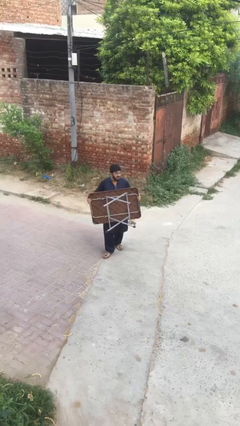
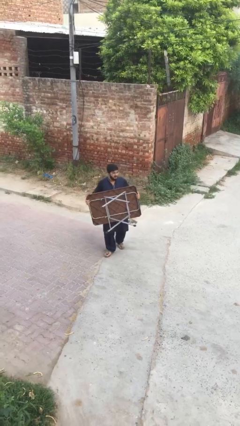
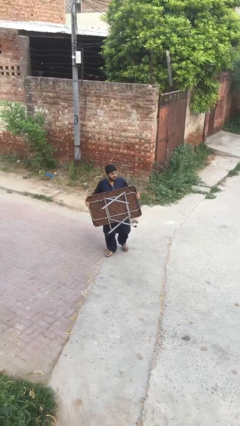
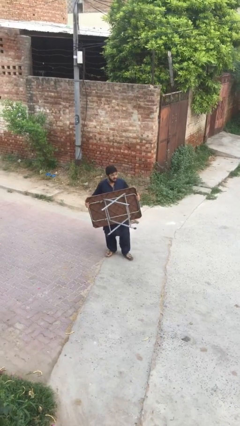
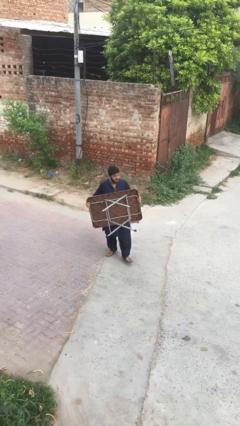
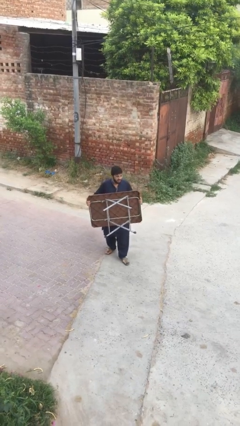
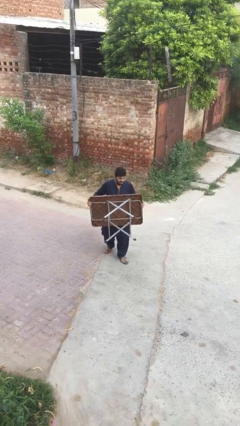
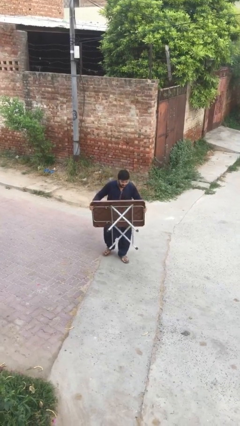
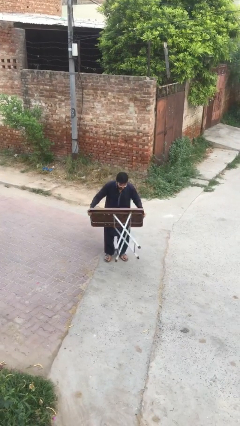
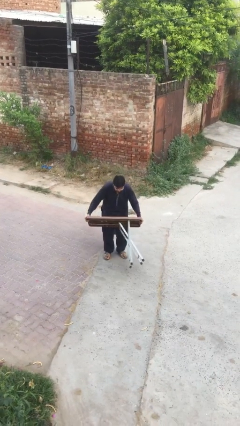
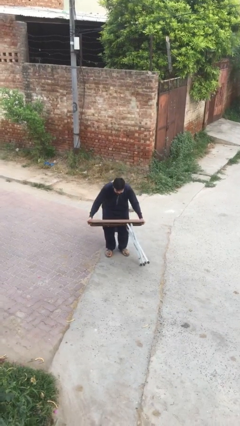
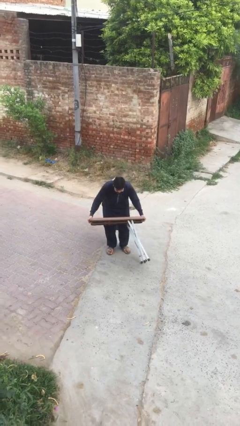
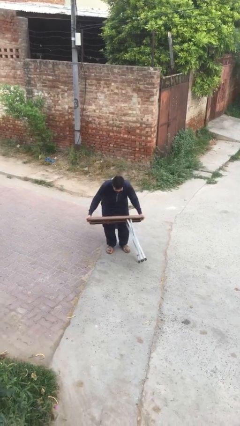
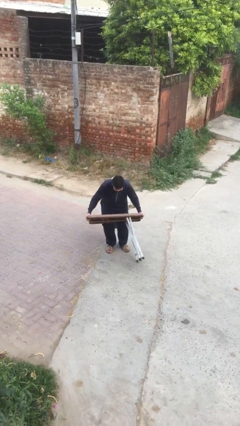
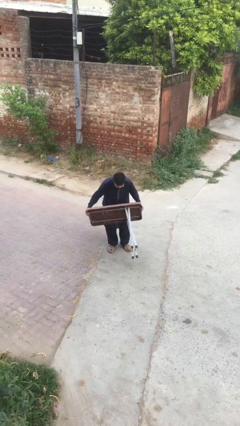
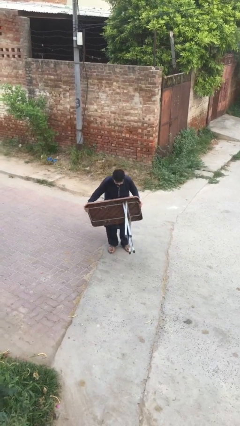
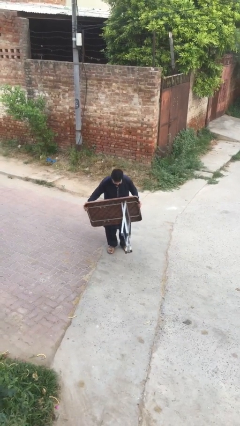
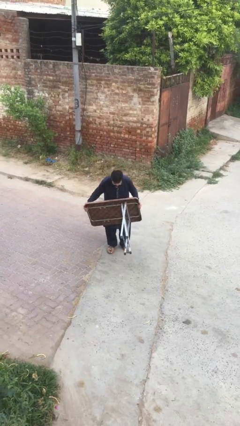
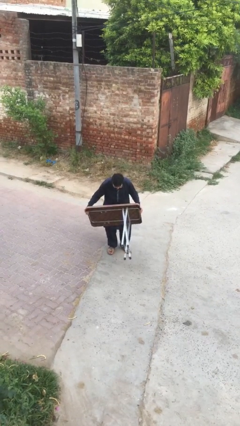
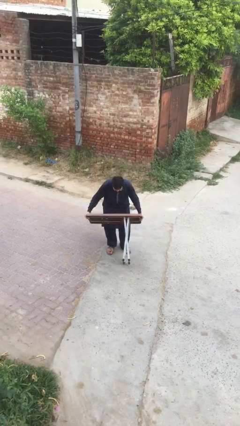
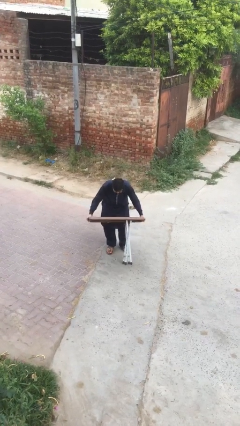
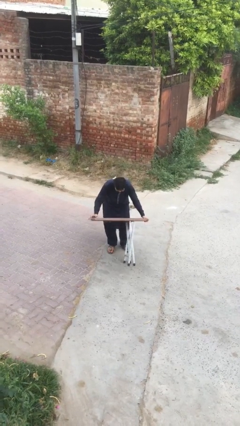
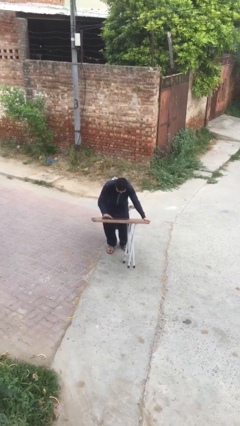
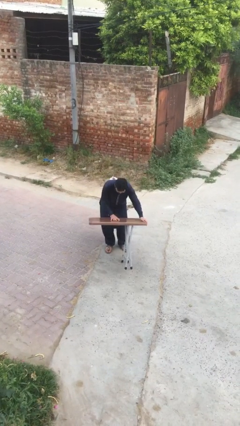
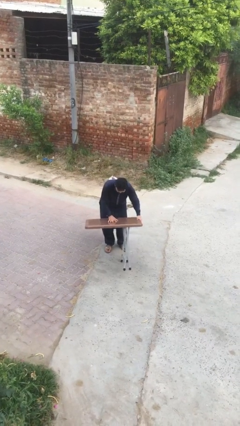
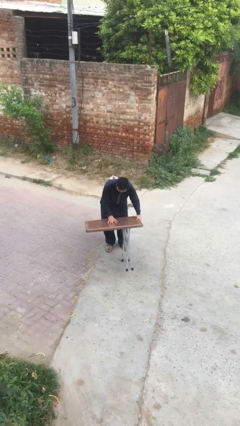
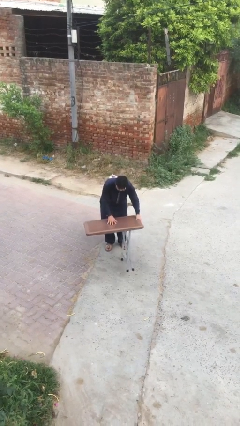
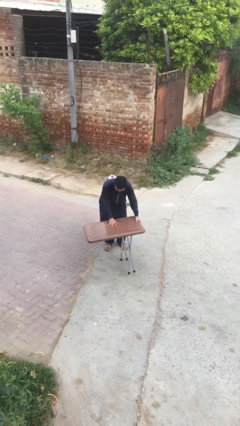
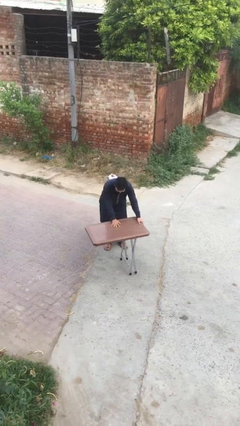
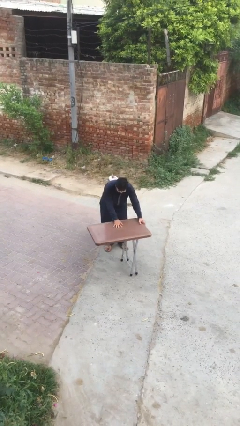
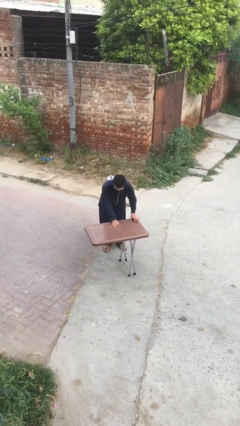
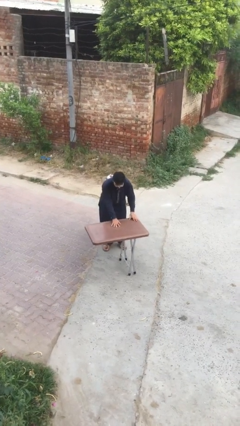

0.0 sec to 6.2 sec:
person puts down object on floor

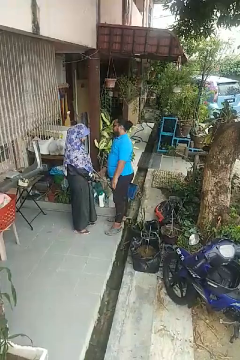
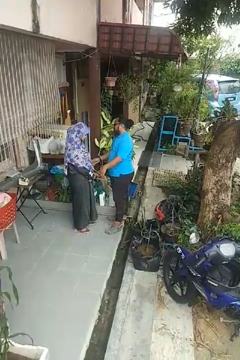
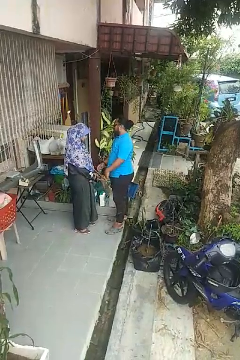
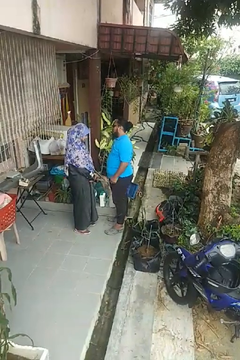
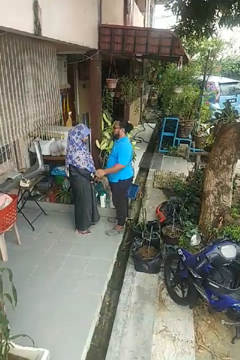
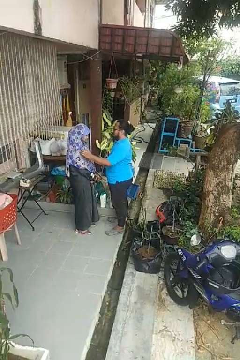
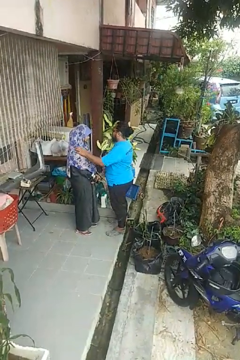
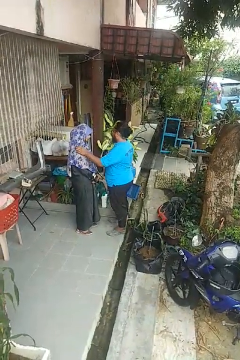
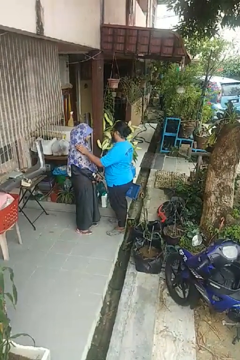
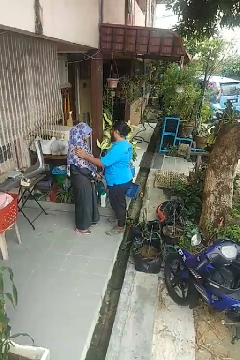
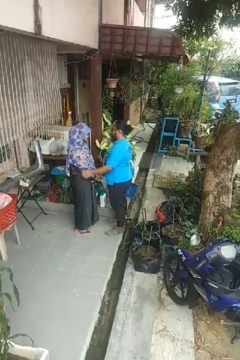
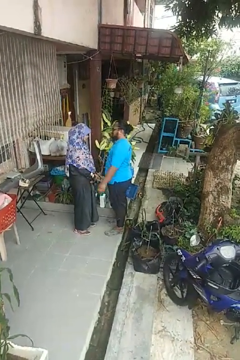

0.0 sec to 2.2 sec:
person pounds shoulders of person

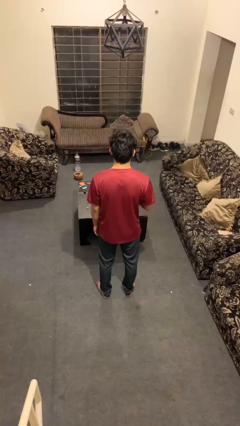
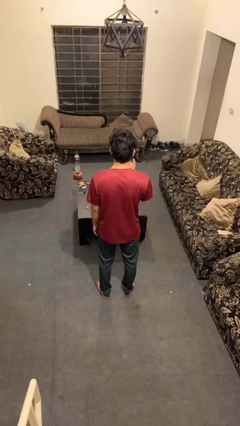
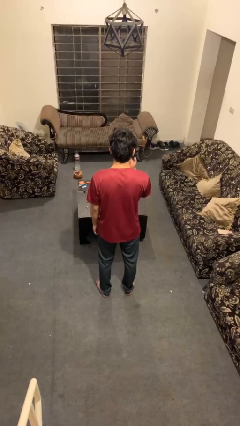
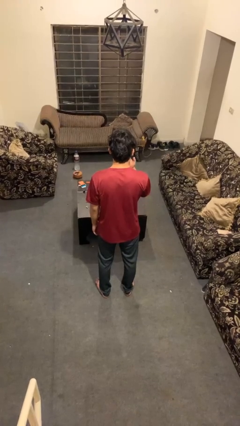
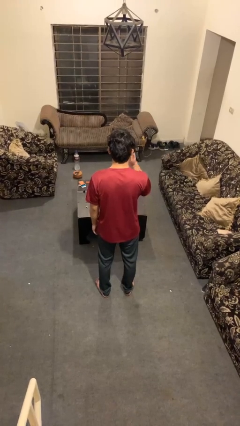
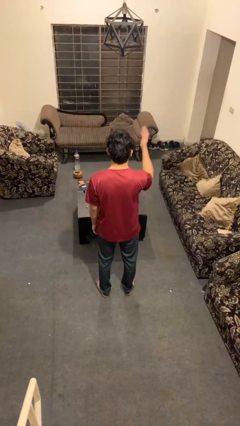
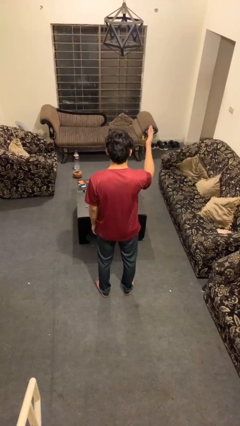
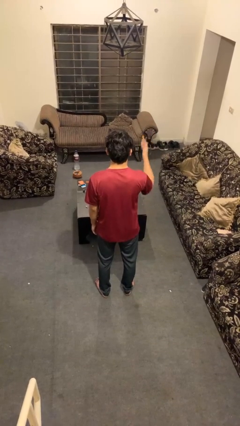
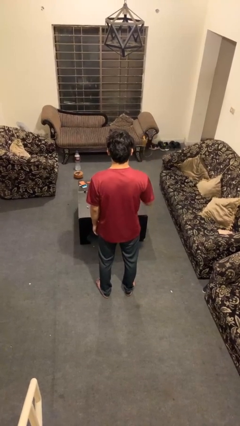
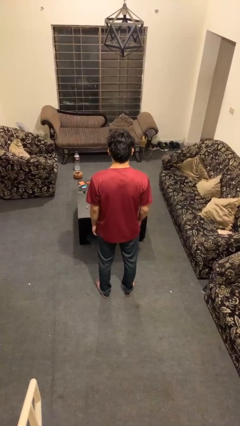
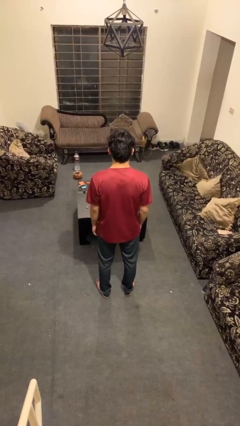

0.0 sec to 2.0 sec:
person gestures blow kiss

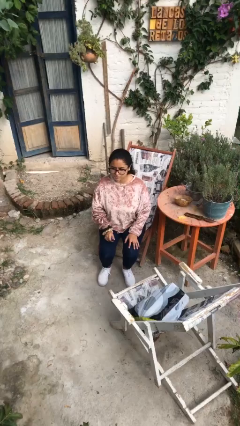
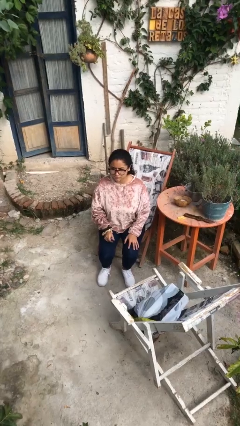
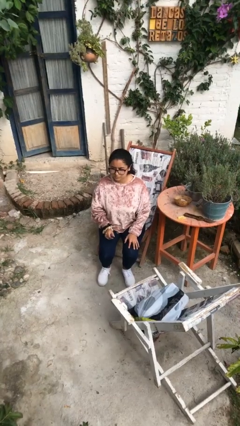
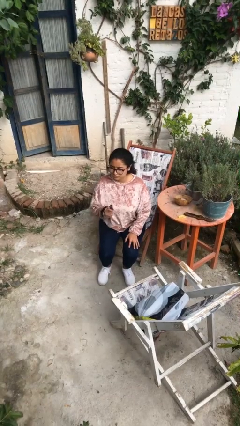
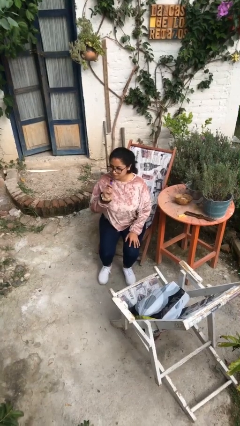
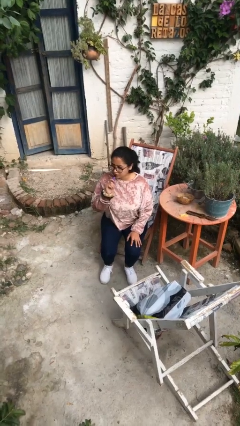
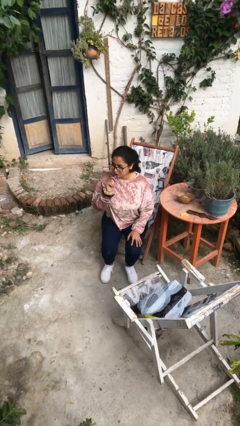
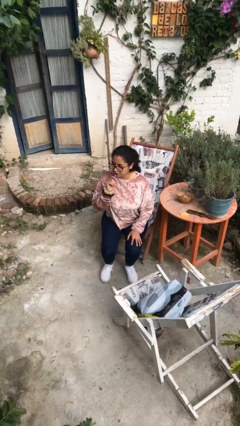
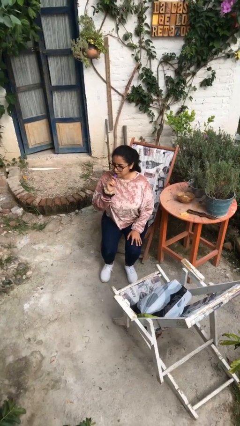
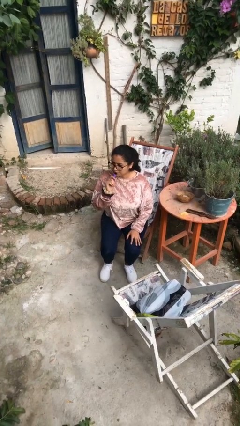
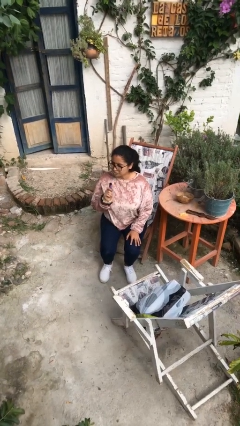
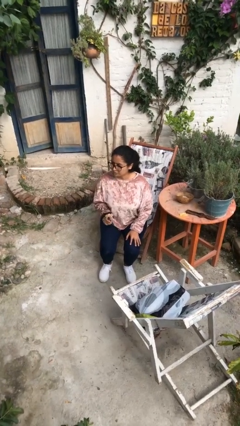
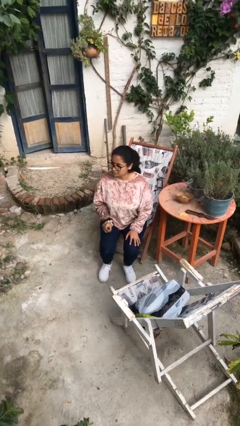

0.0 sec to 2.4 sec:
person vapes

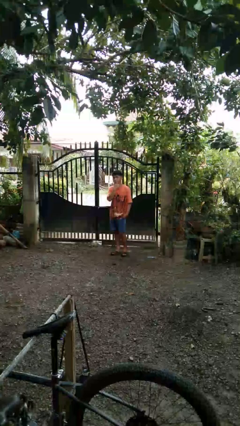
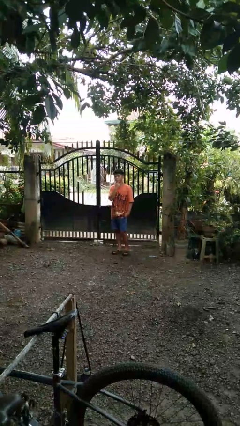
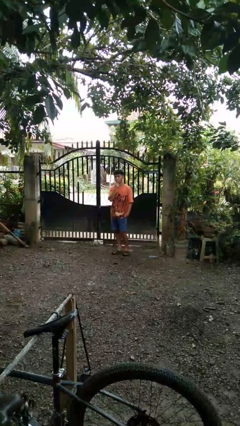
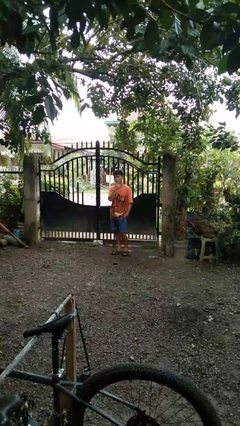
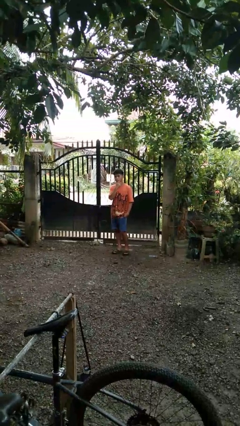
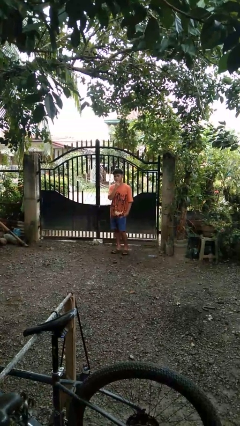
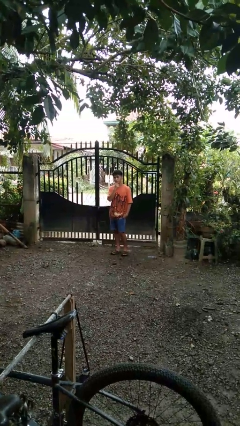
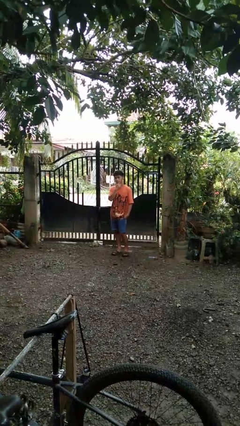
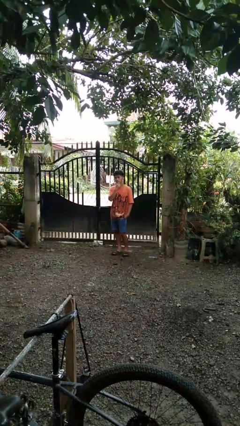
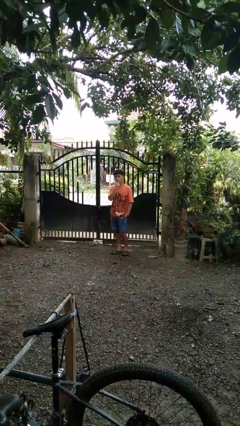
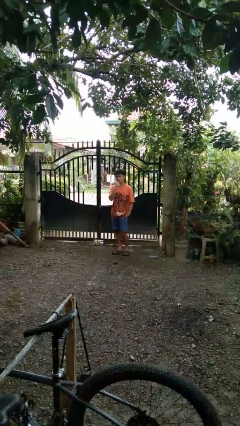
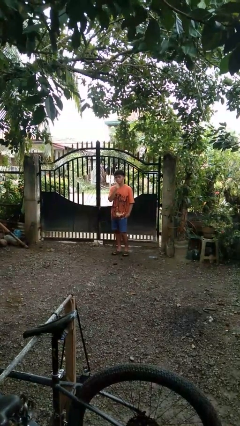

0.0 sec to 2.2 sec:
person strokes chin

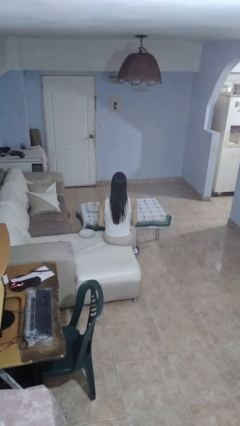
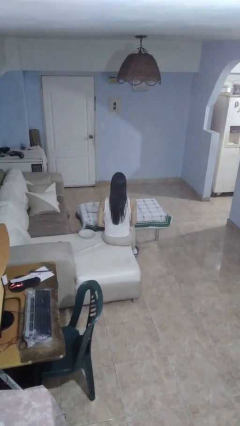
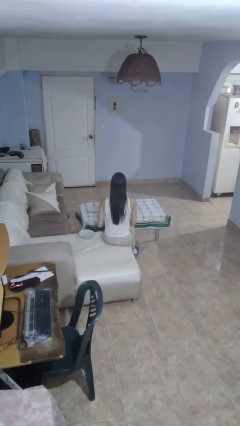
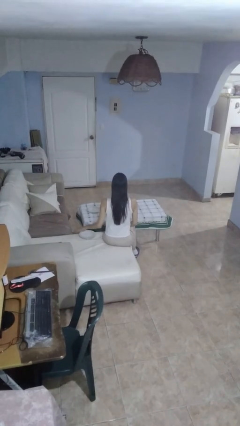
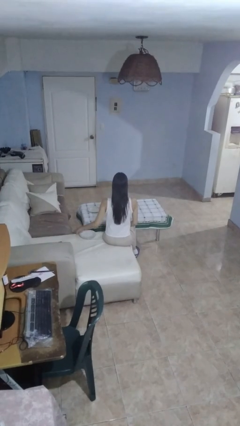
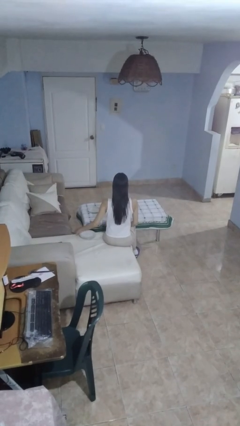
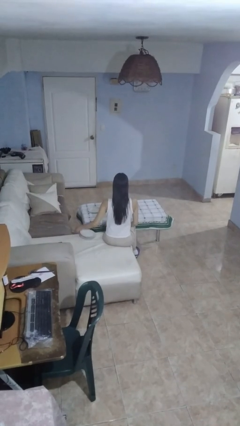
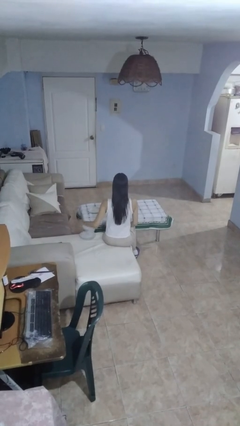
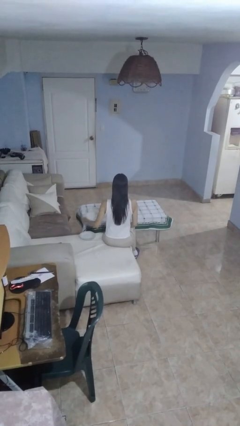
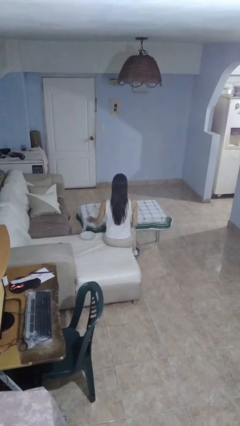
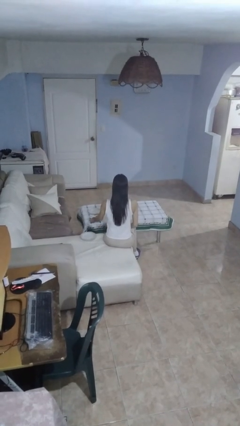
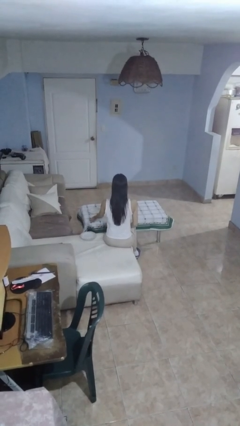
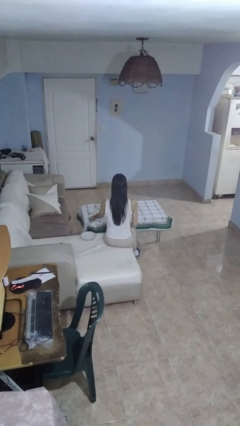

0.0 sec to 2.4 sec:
person sets table

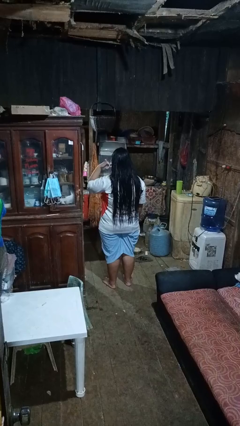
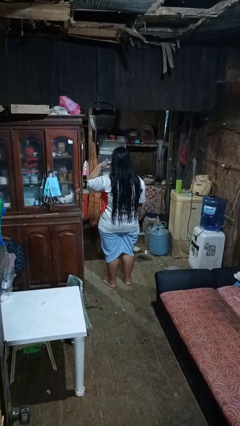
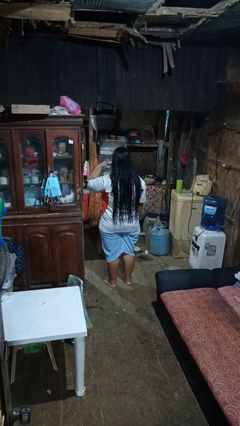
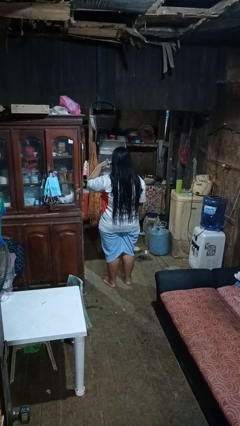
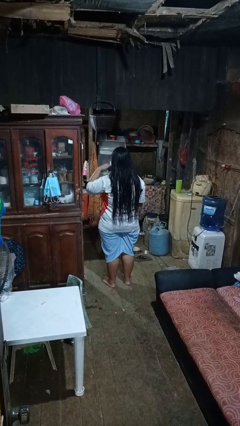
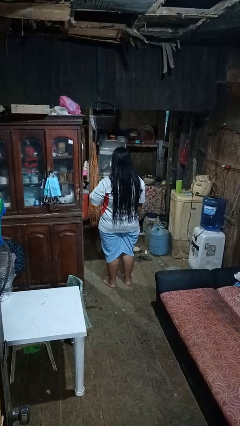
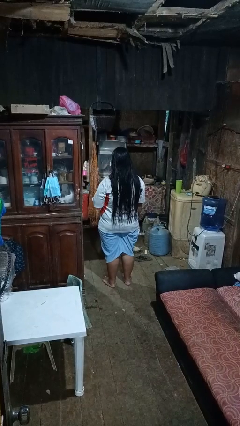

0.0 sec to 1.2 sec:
person gestures call me
